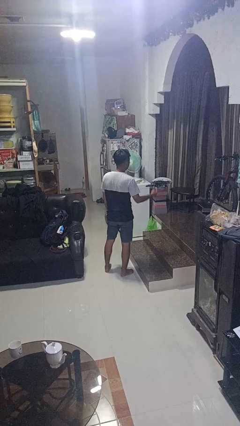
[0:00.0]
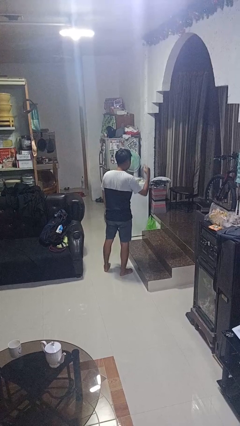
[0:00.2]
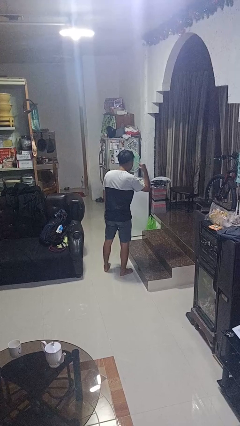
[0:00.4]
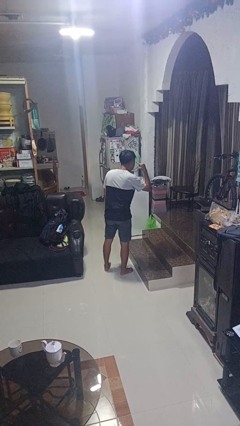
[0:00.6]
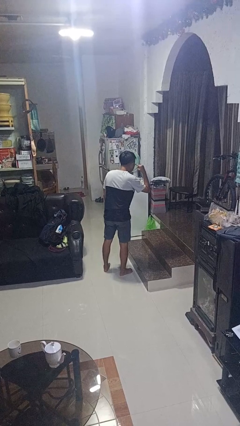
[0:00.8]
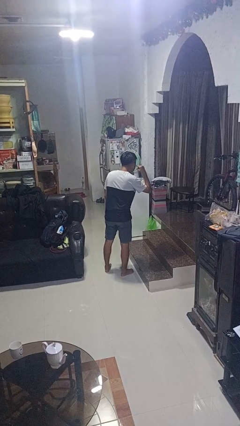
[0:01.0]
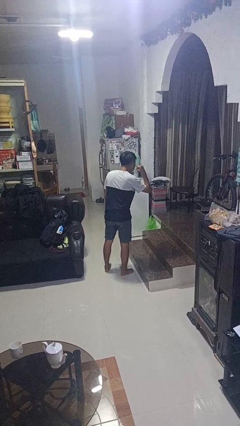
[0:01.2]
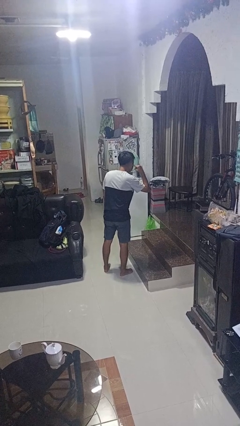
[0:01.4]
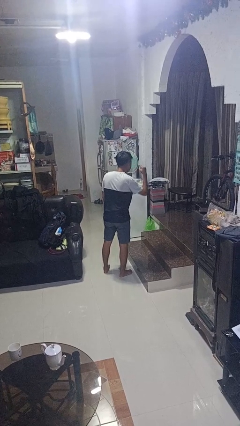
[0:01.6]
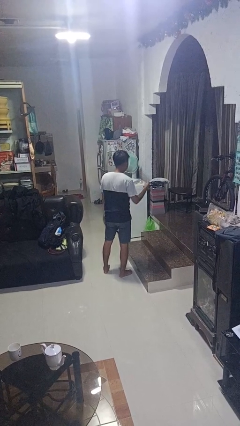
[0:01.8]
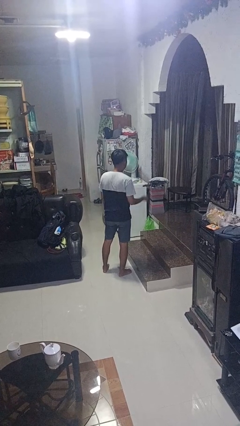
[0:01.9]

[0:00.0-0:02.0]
person gestures listen closely

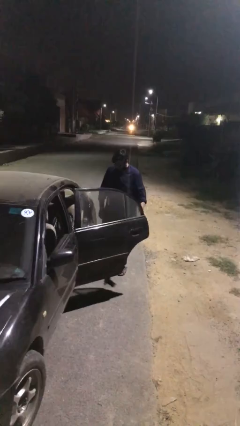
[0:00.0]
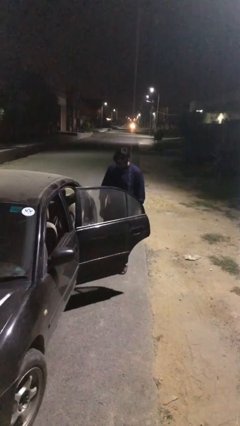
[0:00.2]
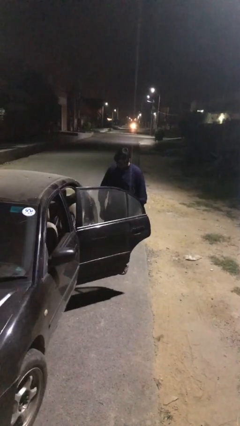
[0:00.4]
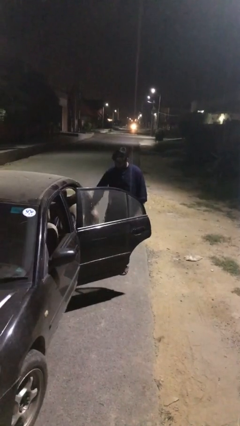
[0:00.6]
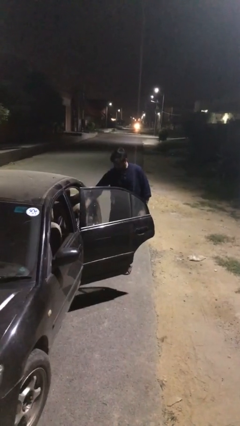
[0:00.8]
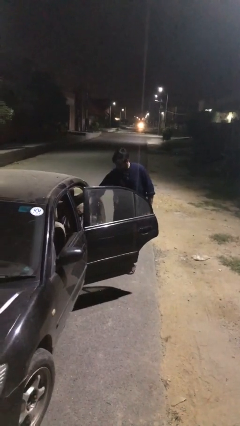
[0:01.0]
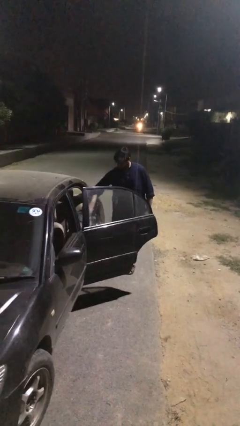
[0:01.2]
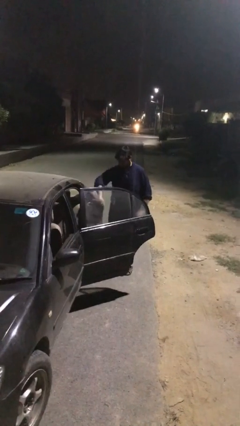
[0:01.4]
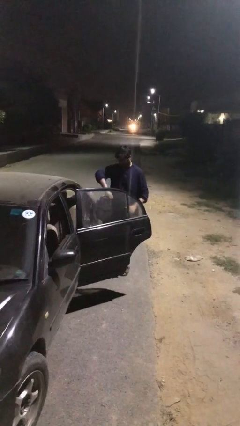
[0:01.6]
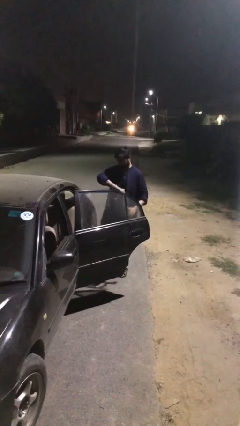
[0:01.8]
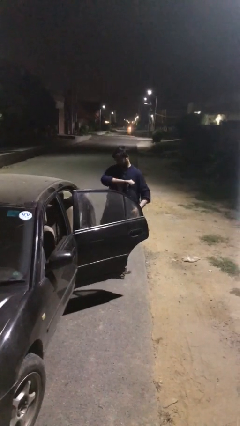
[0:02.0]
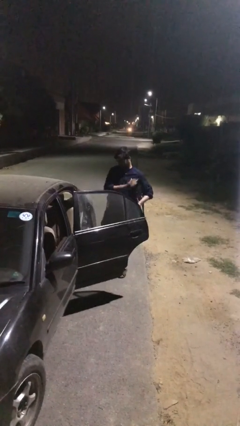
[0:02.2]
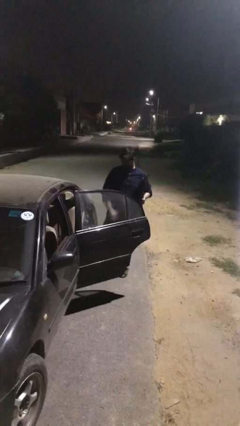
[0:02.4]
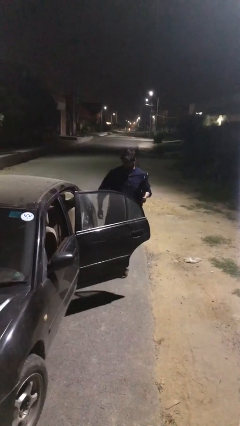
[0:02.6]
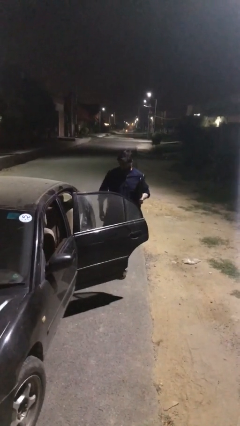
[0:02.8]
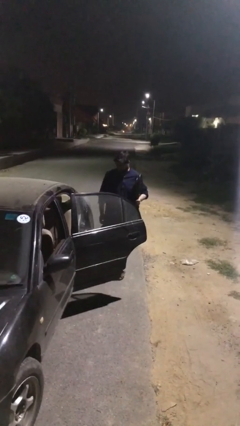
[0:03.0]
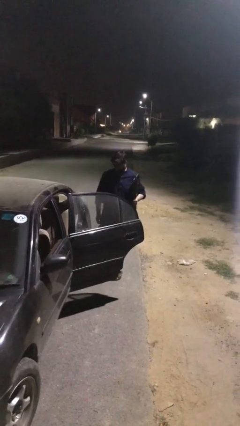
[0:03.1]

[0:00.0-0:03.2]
person unloads car

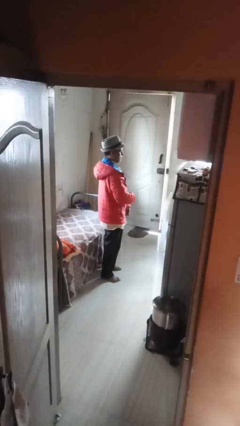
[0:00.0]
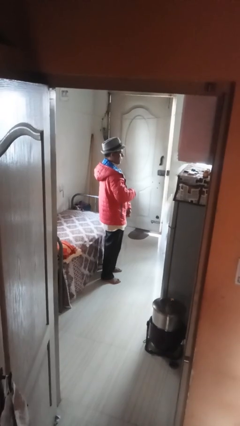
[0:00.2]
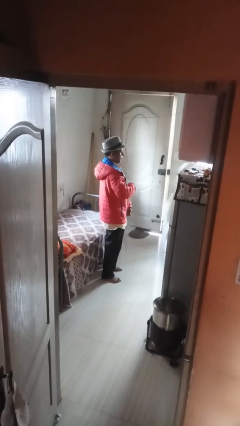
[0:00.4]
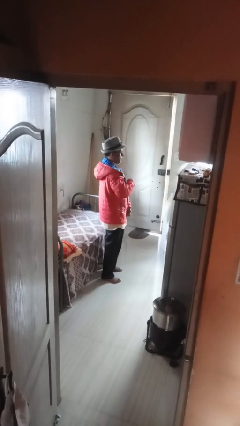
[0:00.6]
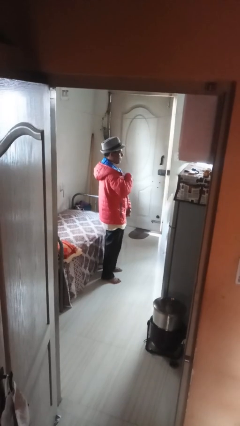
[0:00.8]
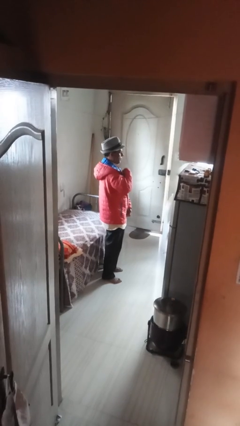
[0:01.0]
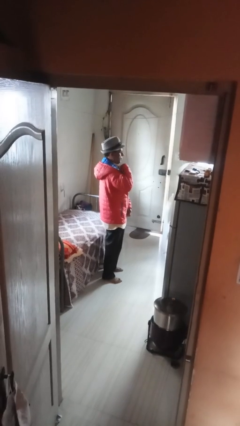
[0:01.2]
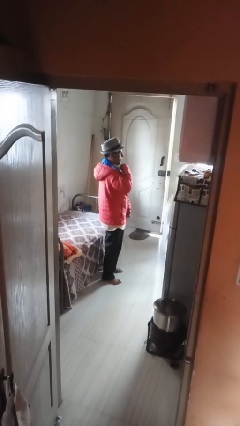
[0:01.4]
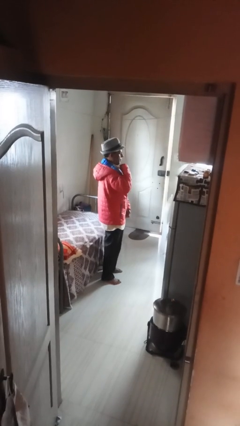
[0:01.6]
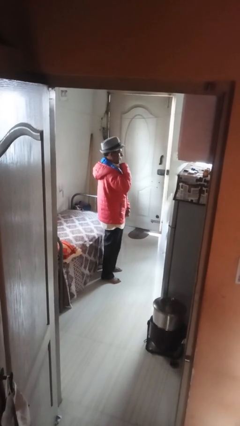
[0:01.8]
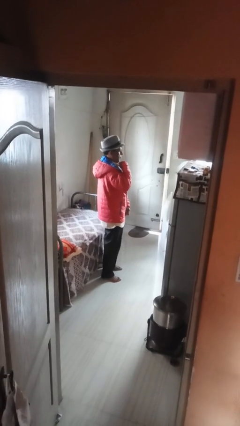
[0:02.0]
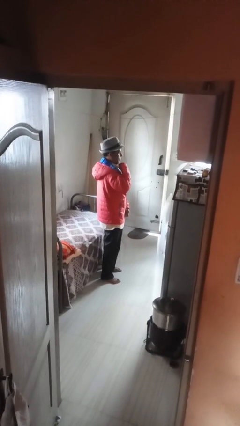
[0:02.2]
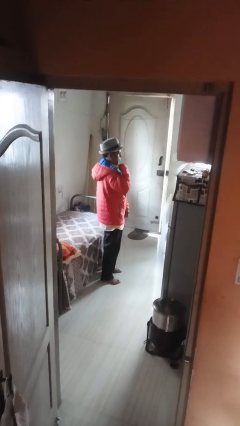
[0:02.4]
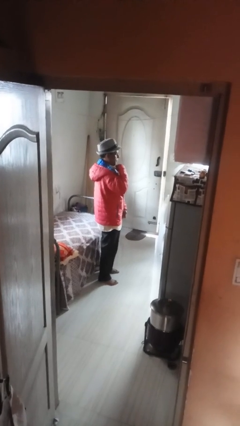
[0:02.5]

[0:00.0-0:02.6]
person zips up jacket

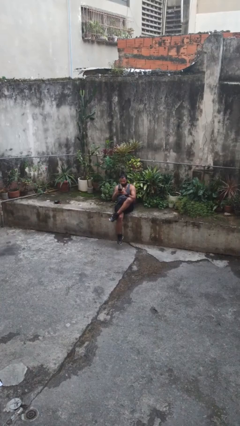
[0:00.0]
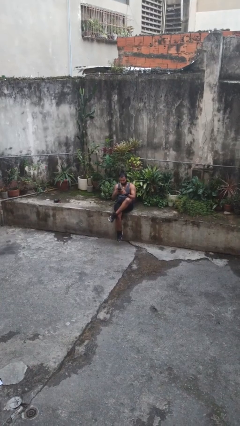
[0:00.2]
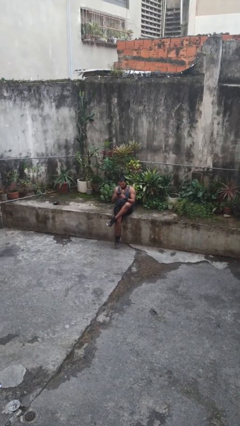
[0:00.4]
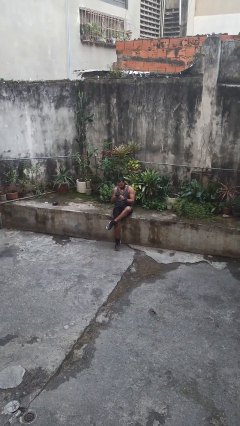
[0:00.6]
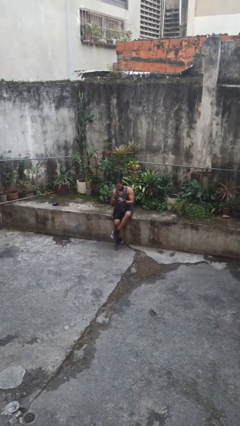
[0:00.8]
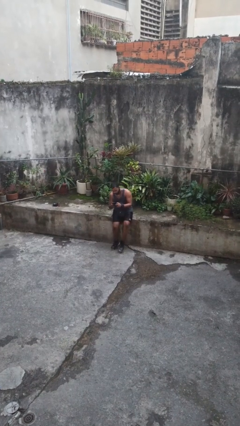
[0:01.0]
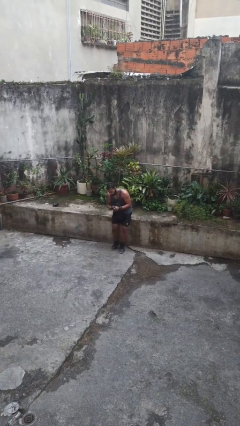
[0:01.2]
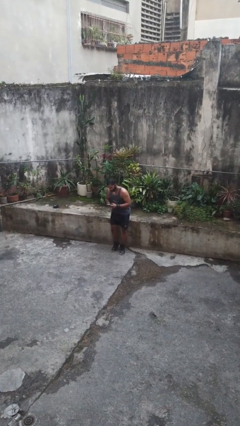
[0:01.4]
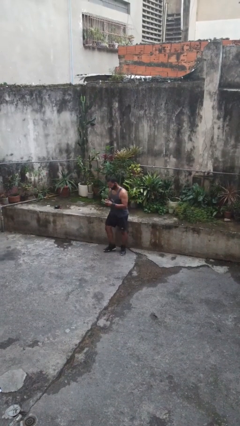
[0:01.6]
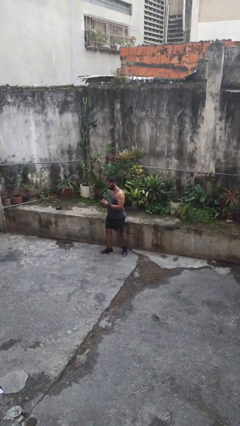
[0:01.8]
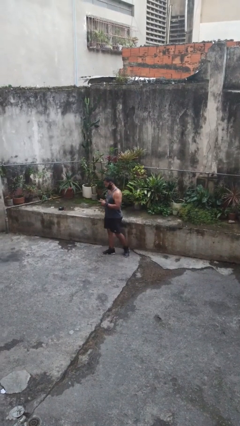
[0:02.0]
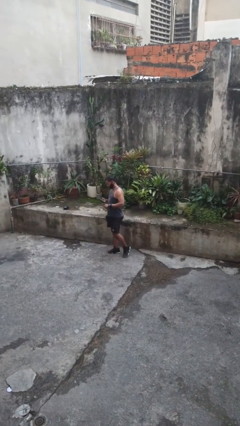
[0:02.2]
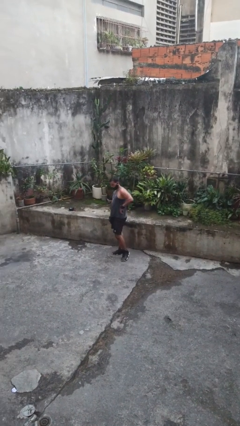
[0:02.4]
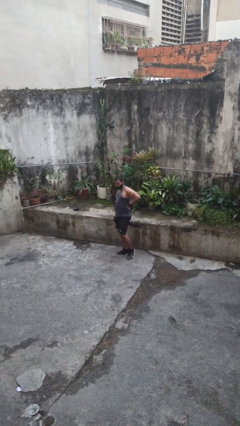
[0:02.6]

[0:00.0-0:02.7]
person stands up

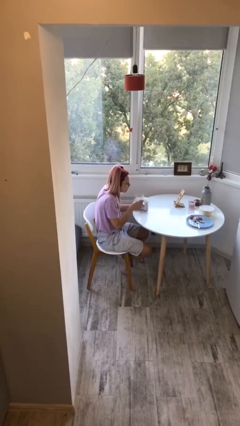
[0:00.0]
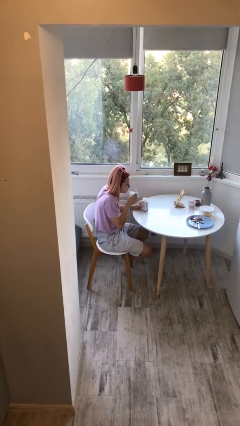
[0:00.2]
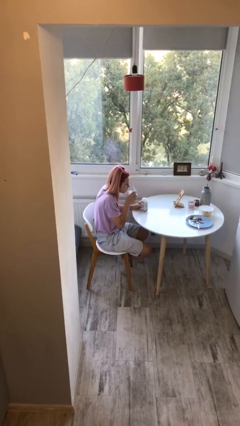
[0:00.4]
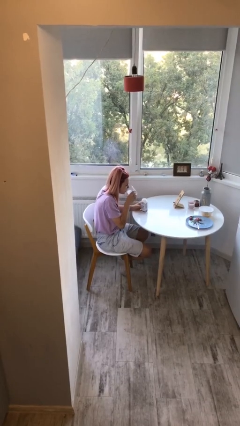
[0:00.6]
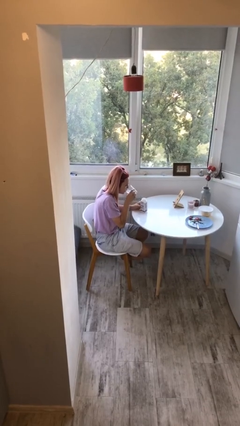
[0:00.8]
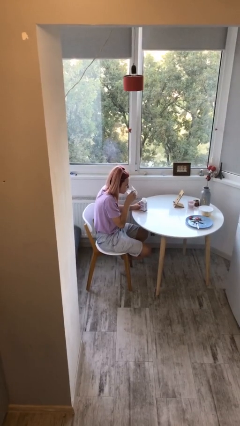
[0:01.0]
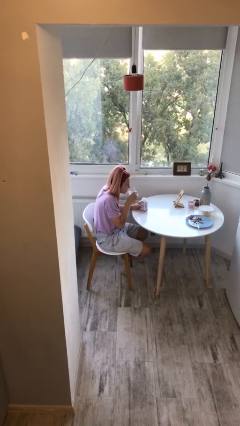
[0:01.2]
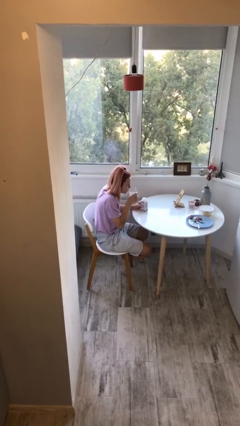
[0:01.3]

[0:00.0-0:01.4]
person drinks from cup

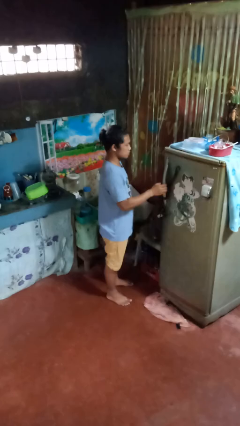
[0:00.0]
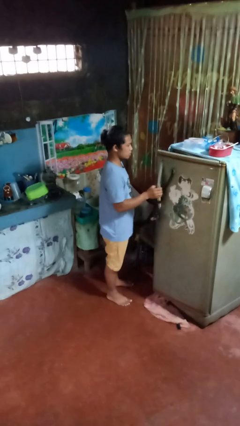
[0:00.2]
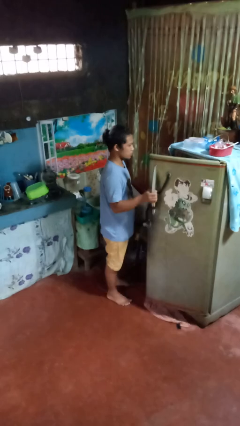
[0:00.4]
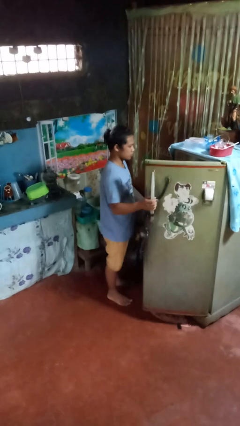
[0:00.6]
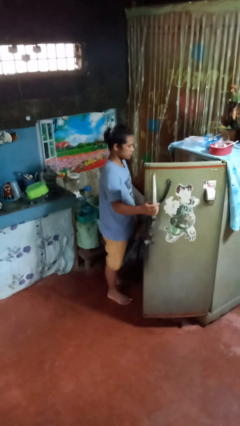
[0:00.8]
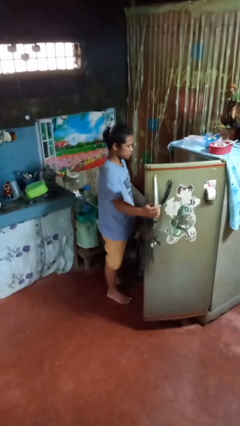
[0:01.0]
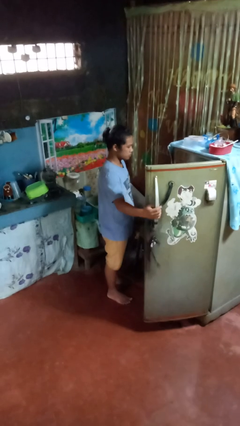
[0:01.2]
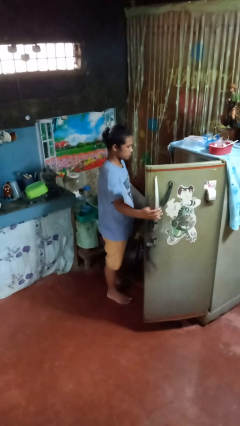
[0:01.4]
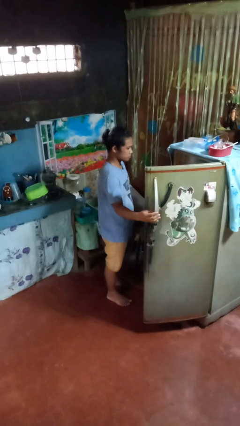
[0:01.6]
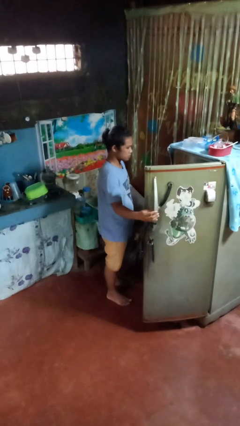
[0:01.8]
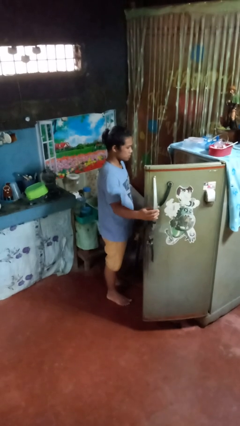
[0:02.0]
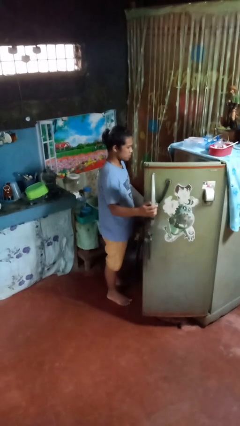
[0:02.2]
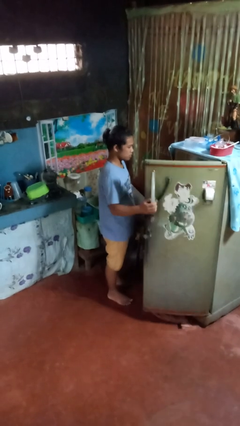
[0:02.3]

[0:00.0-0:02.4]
person opens refrigerator

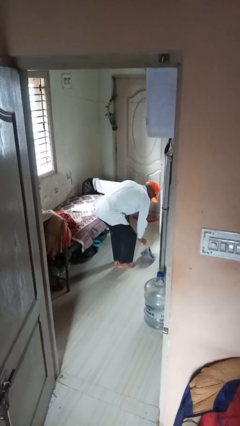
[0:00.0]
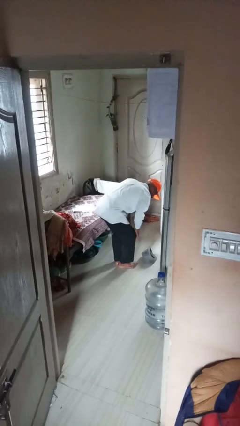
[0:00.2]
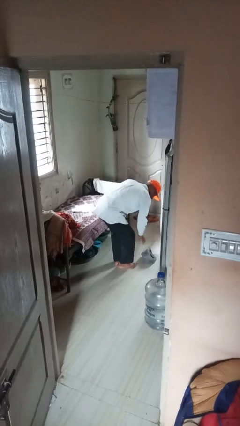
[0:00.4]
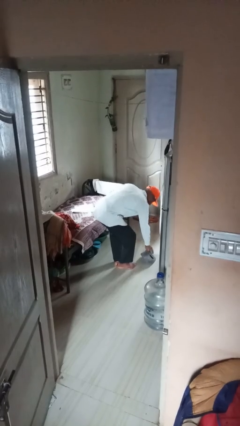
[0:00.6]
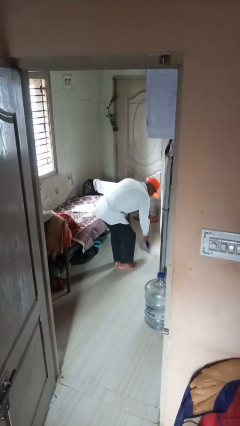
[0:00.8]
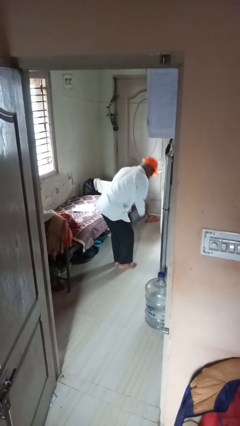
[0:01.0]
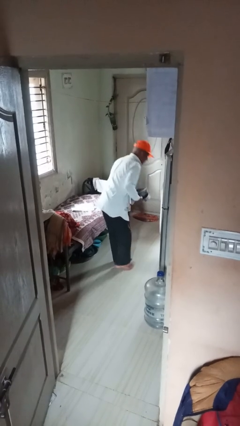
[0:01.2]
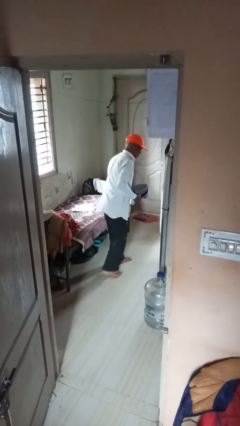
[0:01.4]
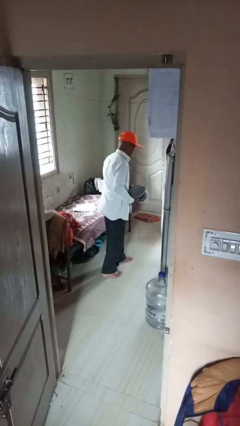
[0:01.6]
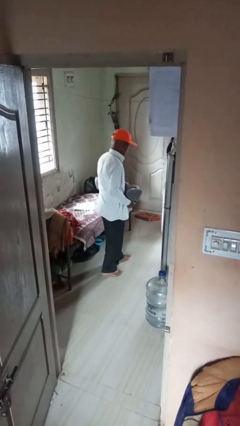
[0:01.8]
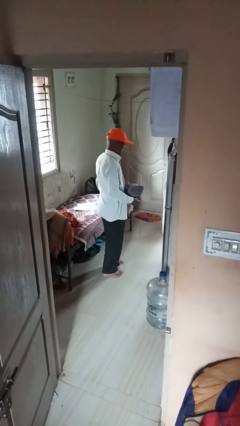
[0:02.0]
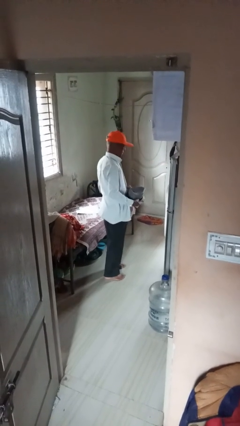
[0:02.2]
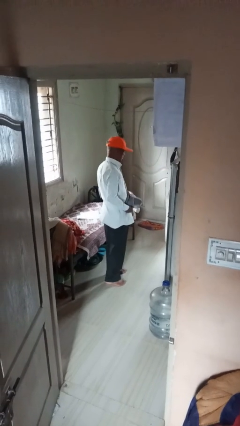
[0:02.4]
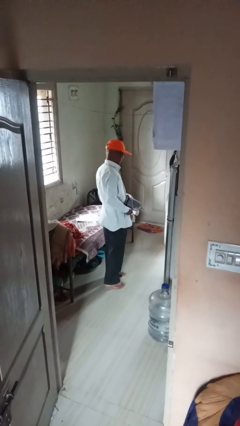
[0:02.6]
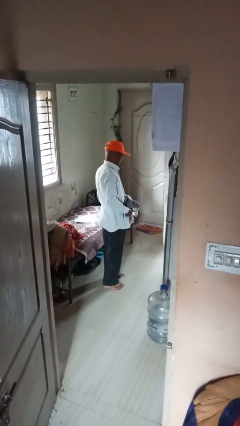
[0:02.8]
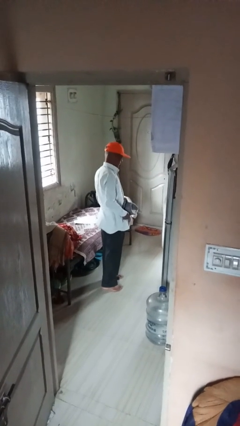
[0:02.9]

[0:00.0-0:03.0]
person picks up object from floor
